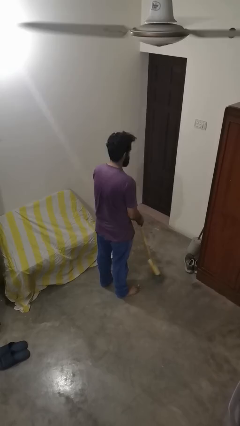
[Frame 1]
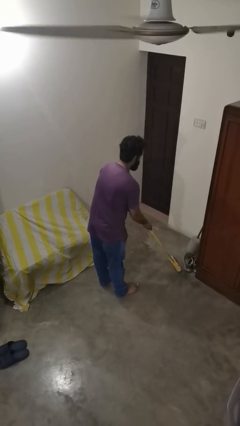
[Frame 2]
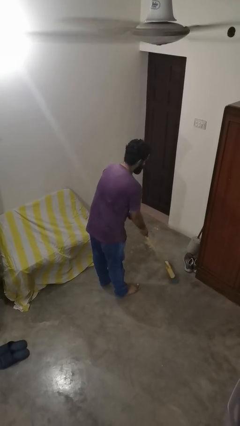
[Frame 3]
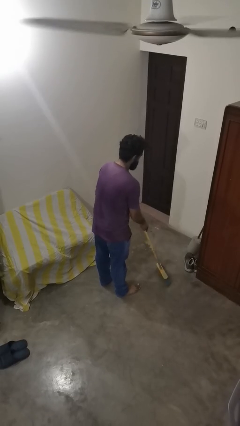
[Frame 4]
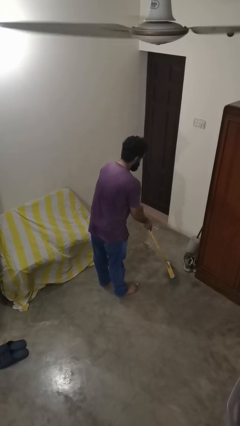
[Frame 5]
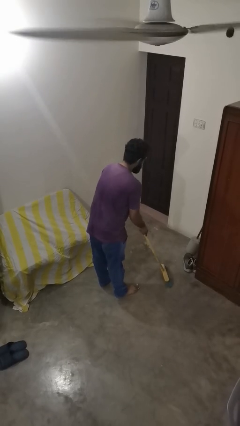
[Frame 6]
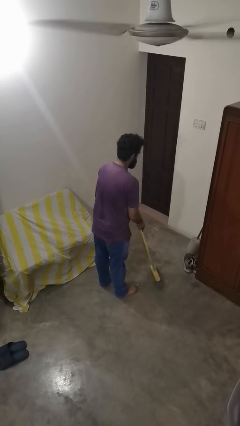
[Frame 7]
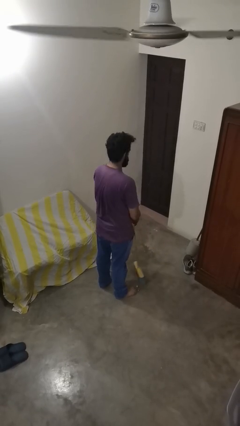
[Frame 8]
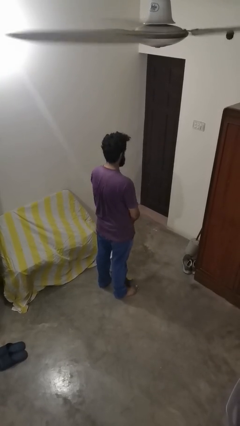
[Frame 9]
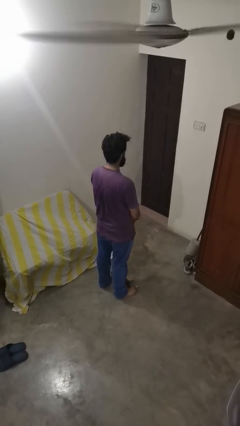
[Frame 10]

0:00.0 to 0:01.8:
person sweeps floor

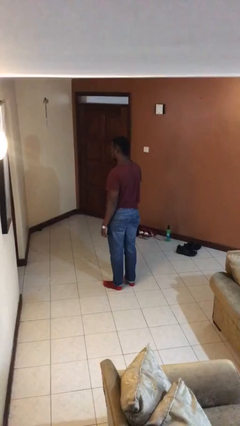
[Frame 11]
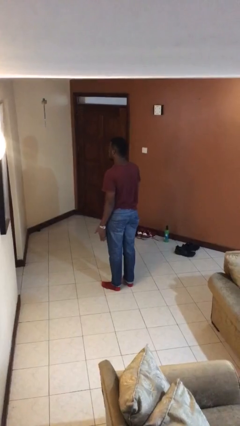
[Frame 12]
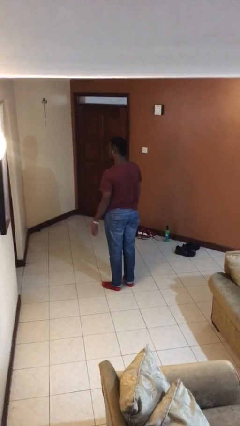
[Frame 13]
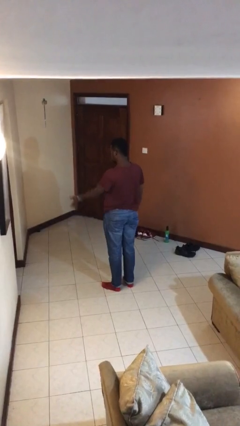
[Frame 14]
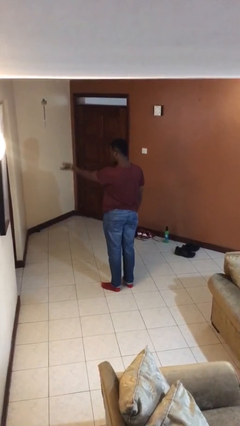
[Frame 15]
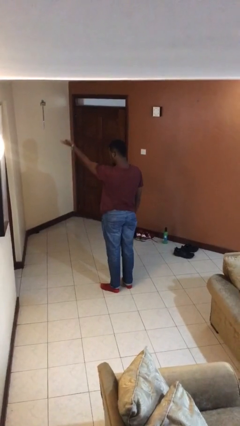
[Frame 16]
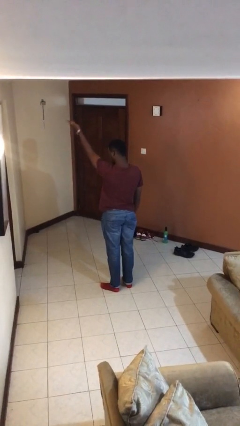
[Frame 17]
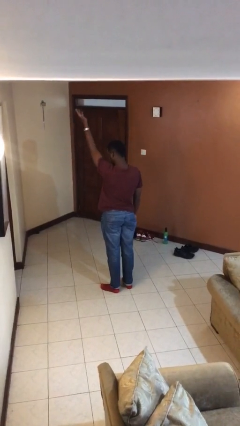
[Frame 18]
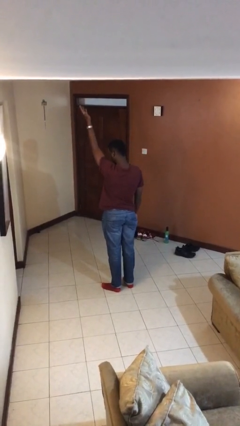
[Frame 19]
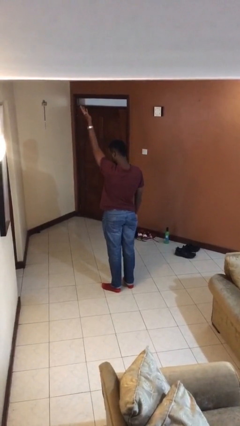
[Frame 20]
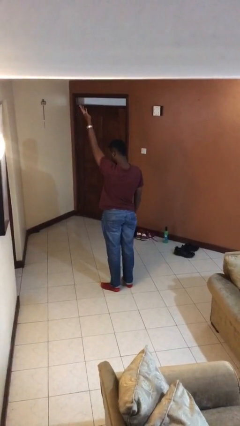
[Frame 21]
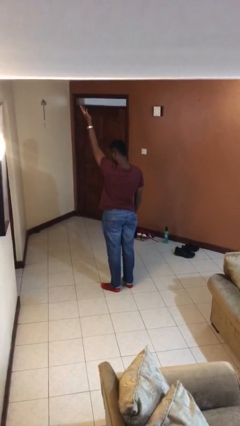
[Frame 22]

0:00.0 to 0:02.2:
person gestures swipe up

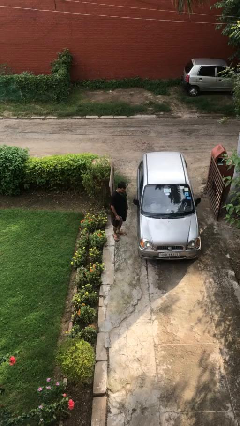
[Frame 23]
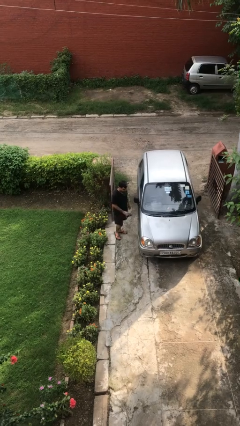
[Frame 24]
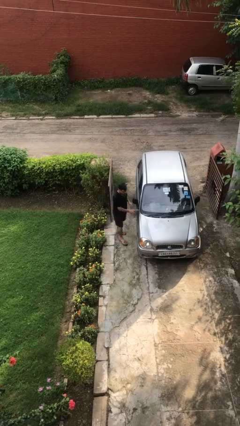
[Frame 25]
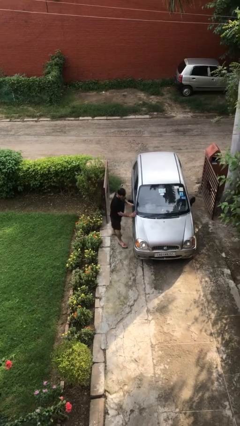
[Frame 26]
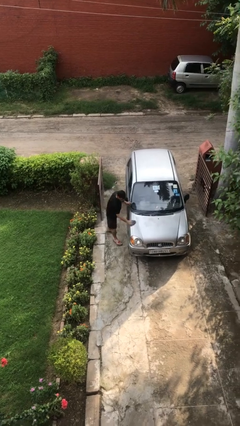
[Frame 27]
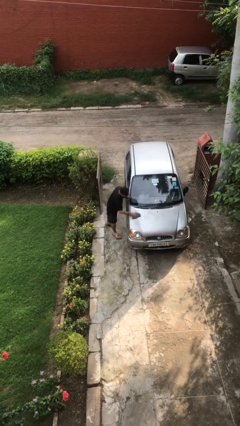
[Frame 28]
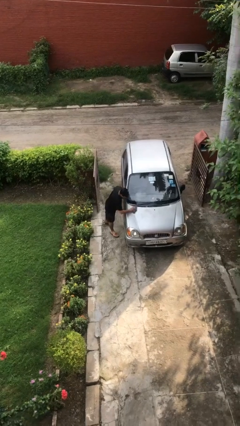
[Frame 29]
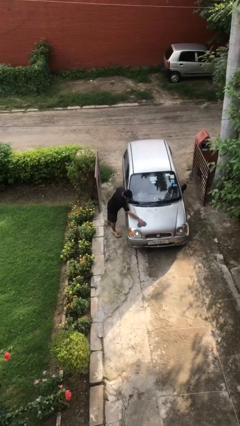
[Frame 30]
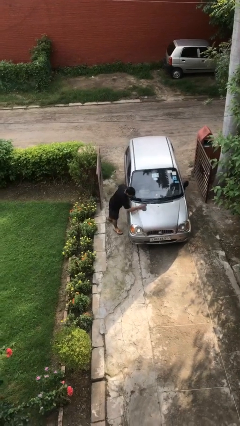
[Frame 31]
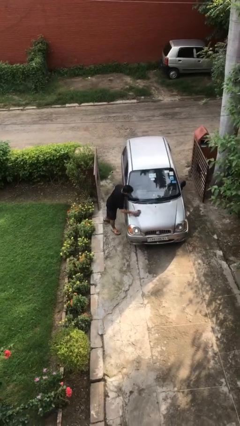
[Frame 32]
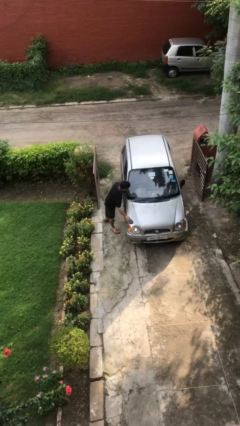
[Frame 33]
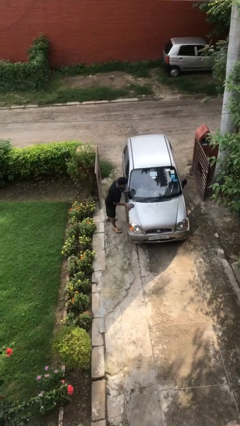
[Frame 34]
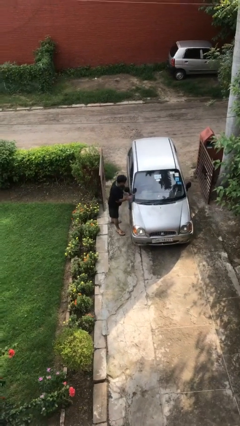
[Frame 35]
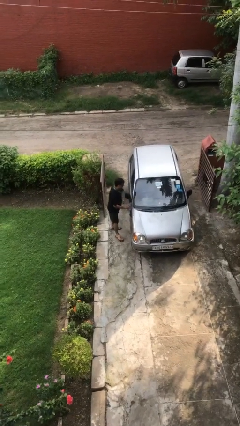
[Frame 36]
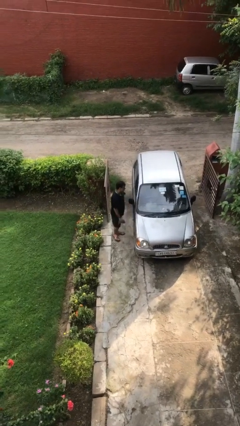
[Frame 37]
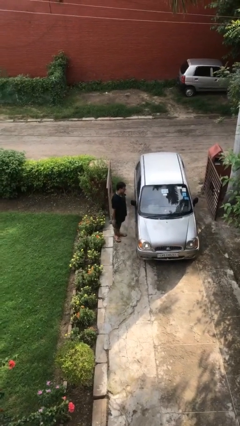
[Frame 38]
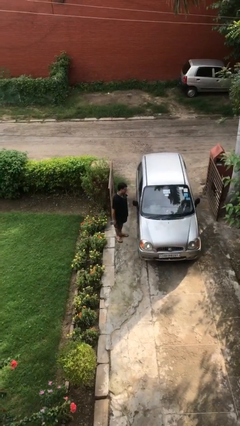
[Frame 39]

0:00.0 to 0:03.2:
person polishes car with rag

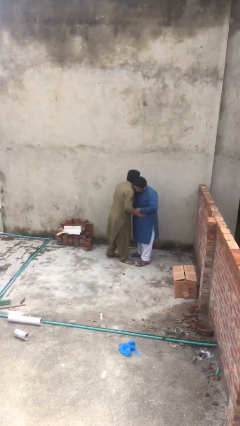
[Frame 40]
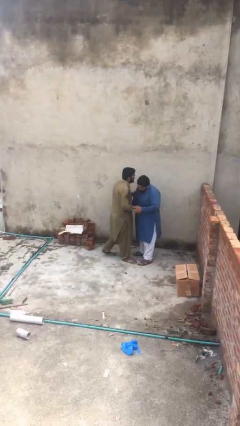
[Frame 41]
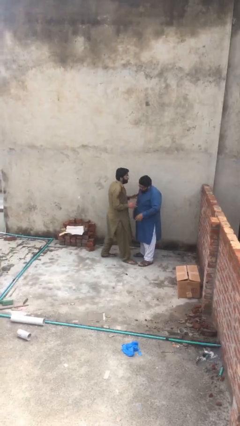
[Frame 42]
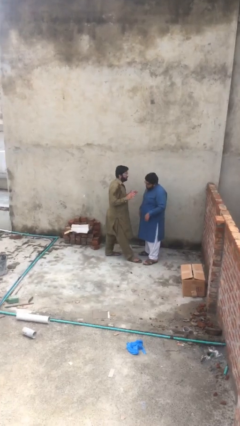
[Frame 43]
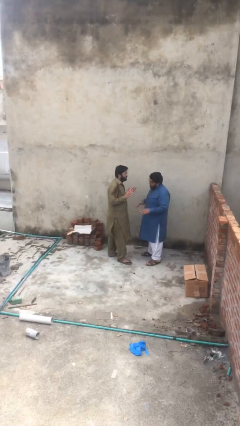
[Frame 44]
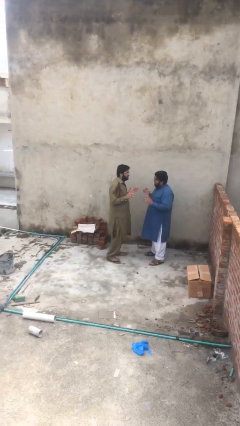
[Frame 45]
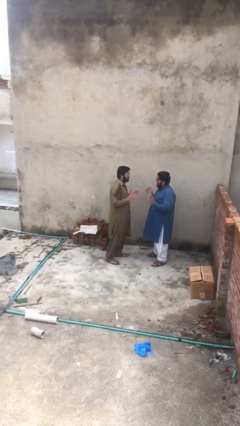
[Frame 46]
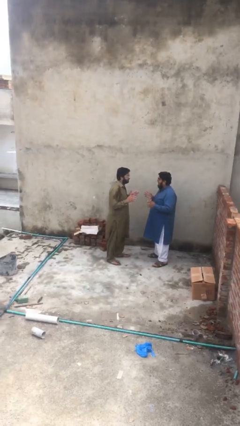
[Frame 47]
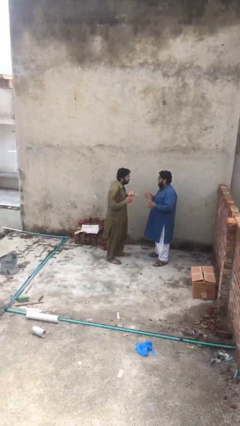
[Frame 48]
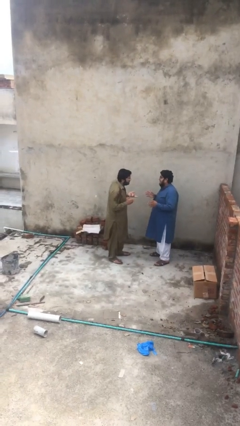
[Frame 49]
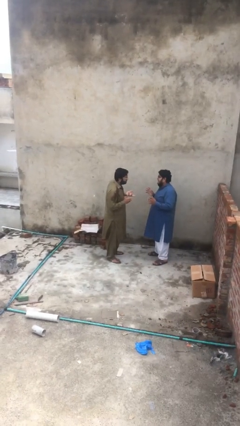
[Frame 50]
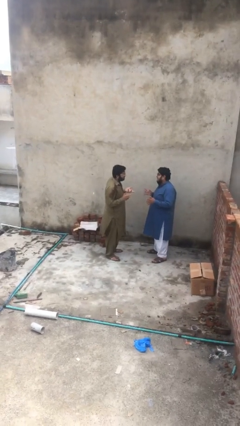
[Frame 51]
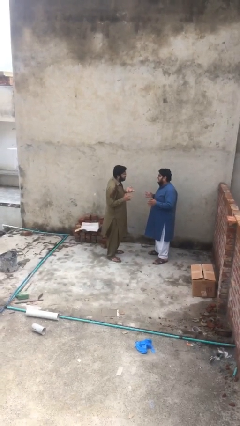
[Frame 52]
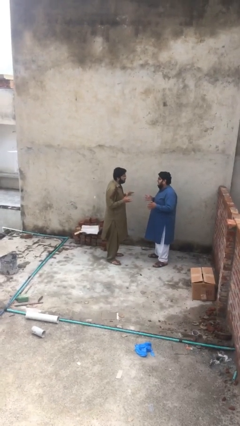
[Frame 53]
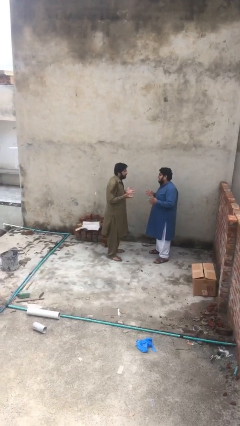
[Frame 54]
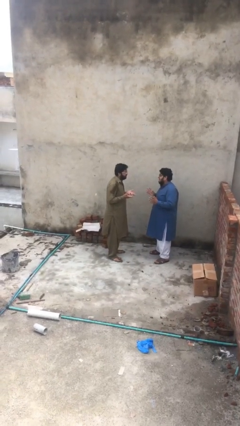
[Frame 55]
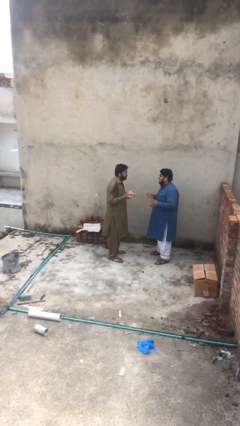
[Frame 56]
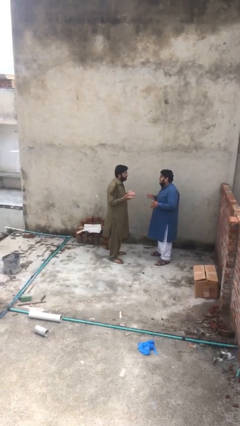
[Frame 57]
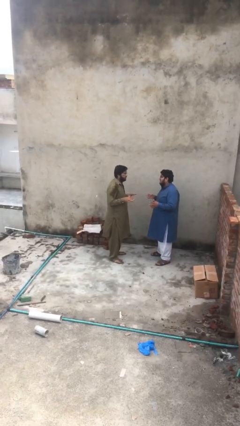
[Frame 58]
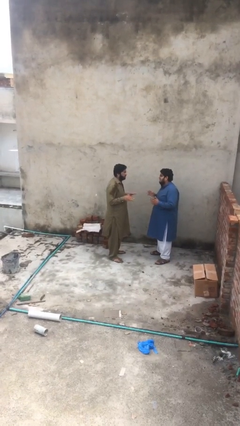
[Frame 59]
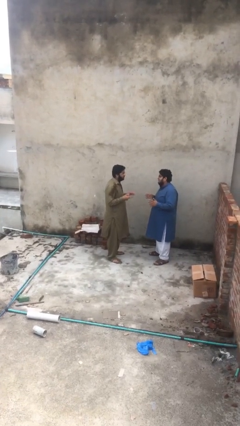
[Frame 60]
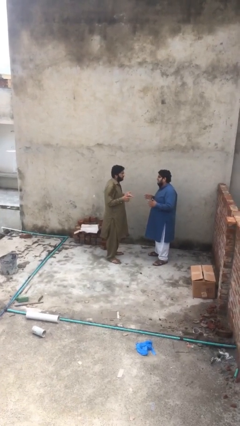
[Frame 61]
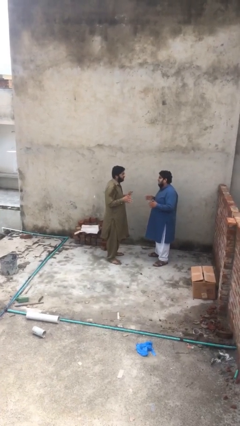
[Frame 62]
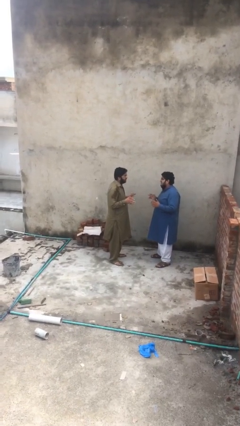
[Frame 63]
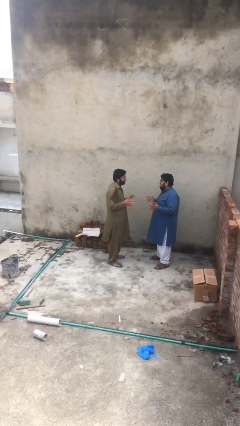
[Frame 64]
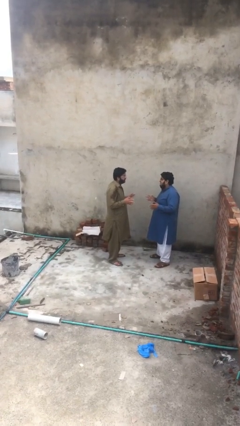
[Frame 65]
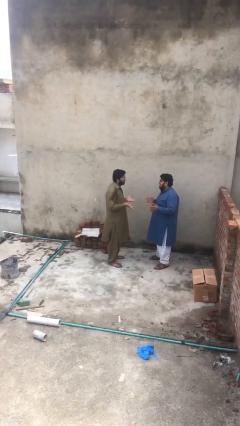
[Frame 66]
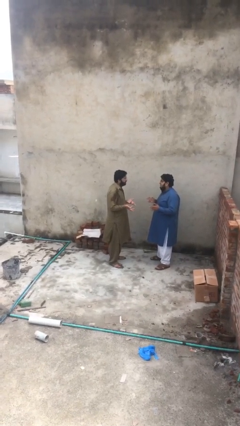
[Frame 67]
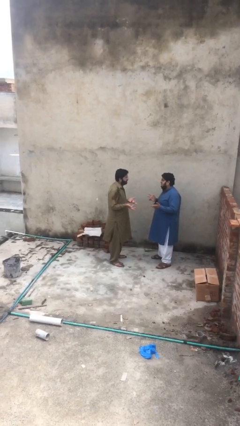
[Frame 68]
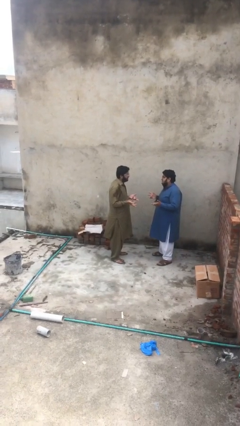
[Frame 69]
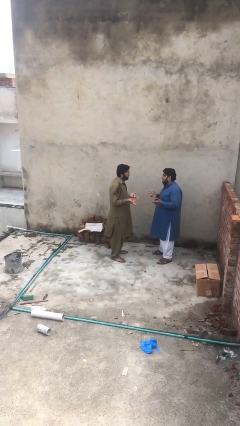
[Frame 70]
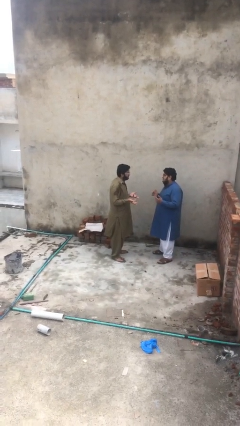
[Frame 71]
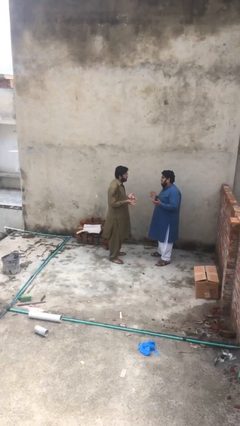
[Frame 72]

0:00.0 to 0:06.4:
person talks to person

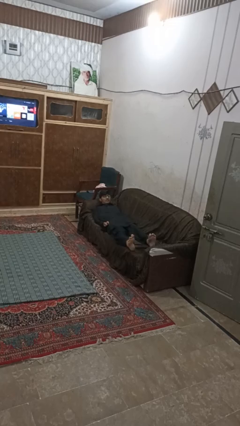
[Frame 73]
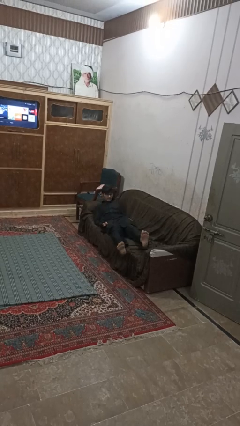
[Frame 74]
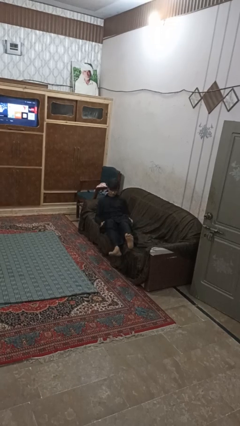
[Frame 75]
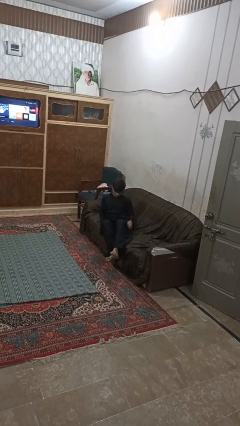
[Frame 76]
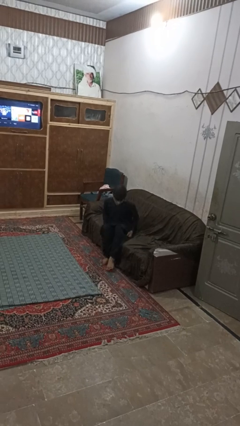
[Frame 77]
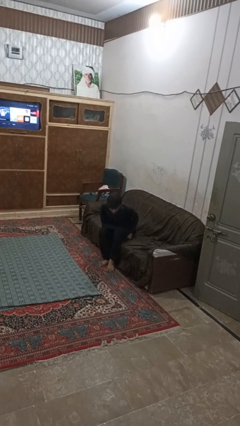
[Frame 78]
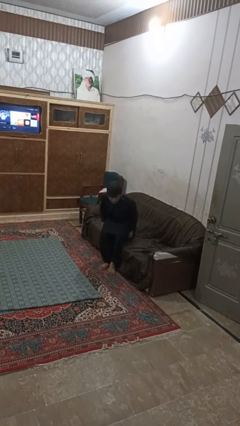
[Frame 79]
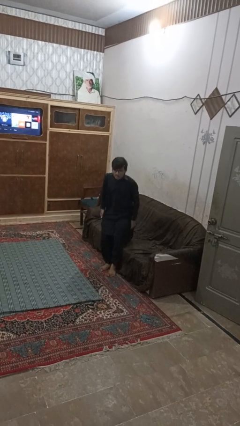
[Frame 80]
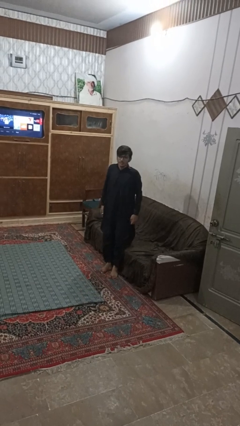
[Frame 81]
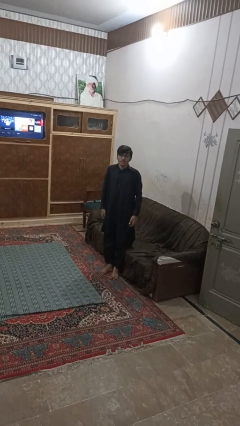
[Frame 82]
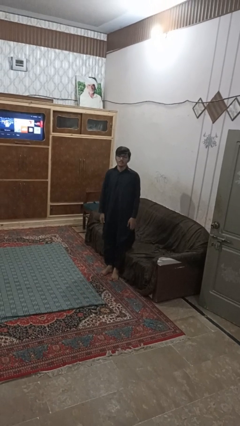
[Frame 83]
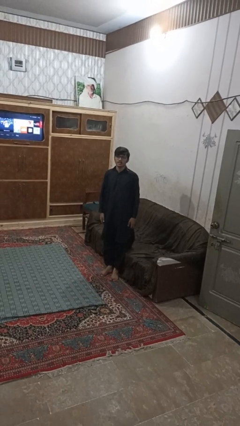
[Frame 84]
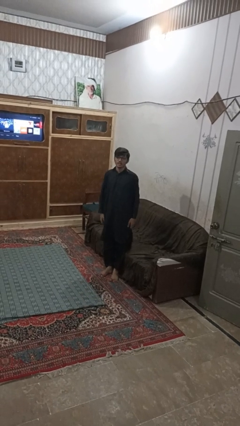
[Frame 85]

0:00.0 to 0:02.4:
person stands up

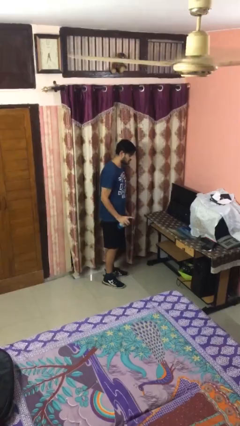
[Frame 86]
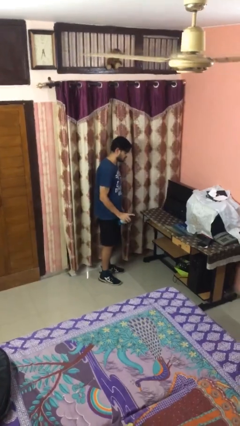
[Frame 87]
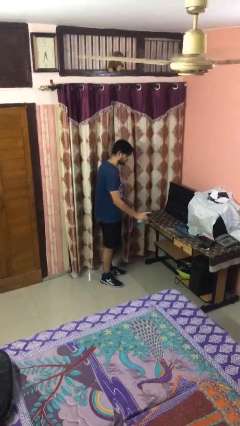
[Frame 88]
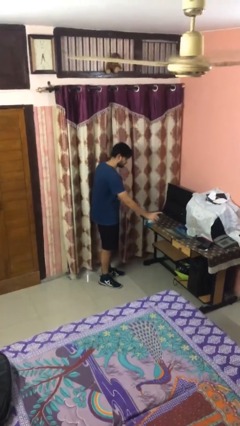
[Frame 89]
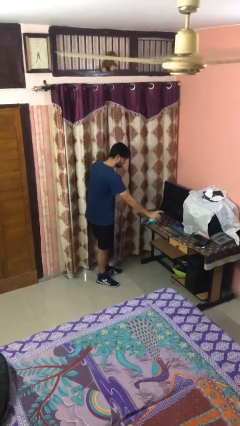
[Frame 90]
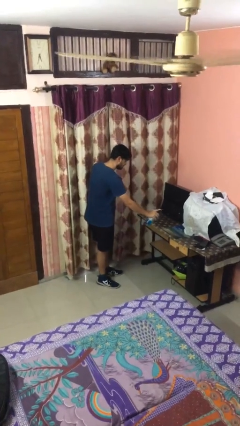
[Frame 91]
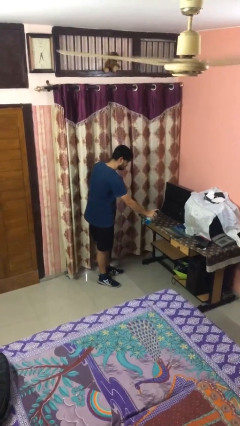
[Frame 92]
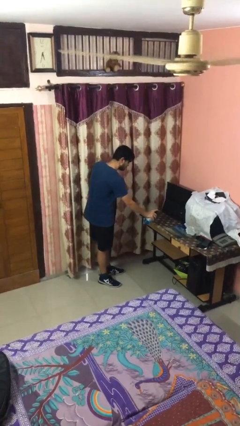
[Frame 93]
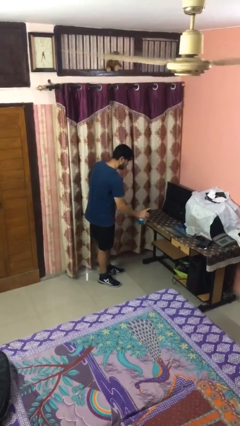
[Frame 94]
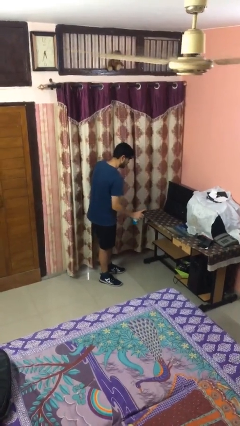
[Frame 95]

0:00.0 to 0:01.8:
person sprays from bottle
